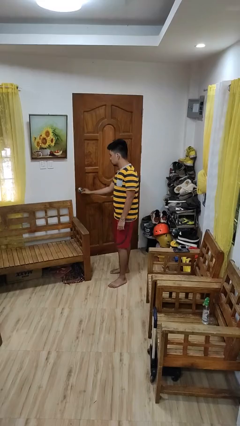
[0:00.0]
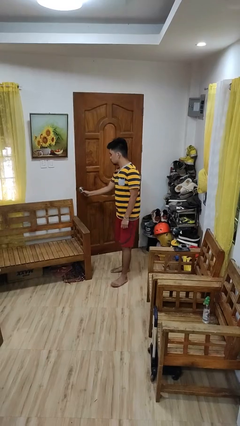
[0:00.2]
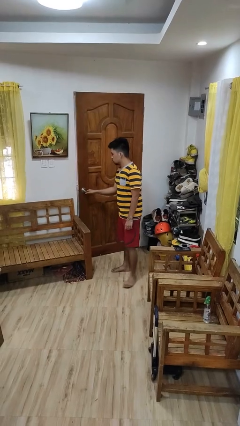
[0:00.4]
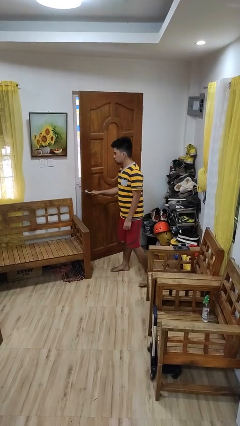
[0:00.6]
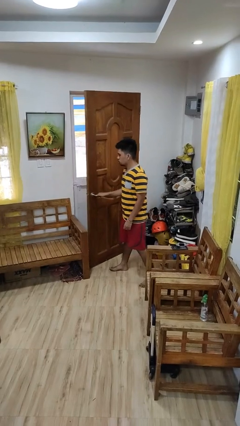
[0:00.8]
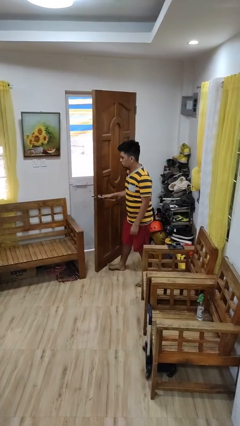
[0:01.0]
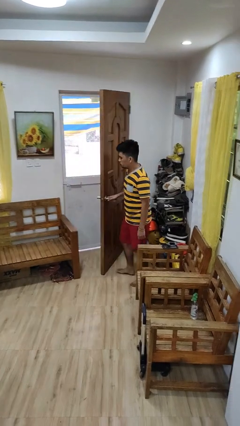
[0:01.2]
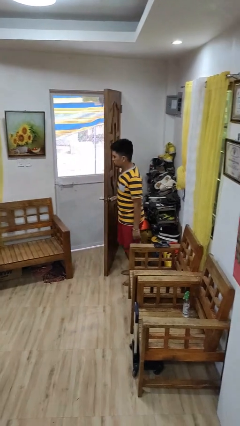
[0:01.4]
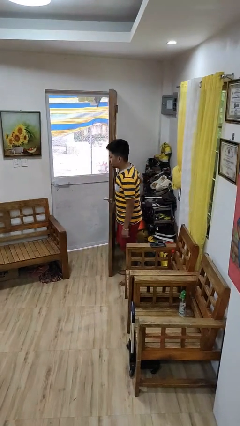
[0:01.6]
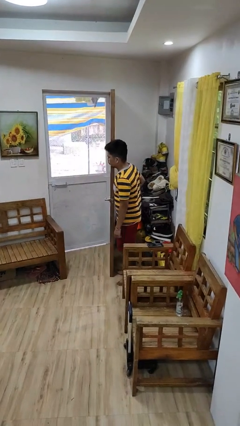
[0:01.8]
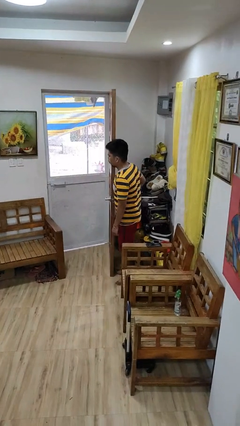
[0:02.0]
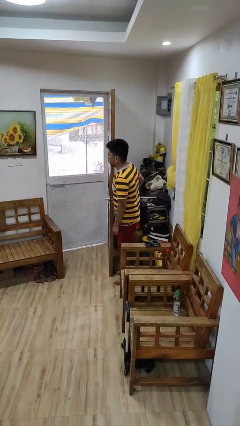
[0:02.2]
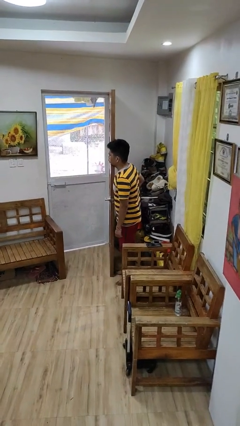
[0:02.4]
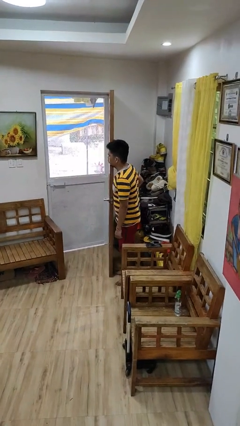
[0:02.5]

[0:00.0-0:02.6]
person opens facility door

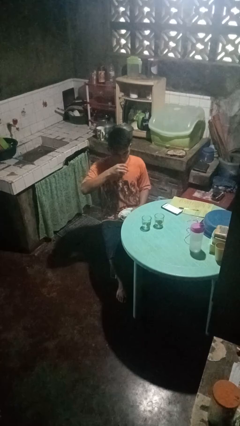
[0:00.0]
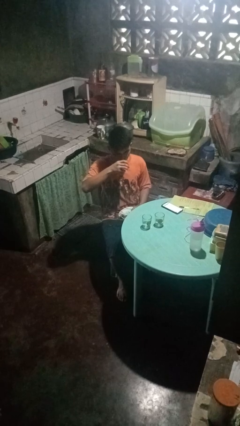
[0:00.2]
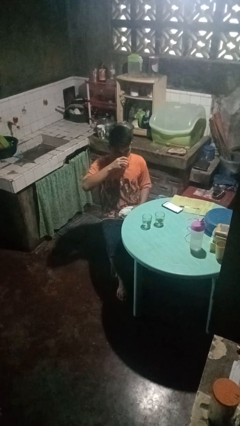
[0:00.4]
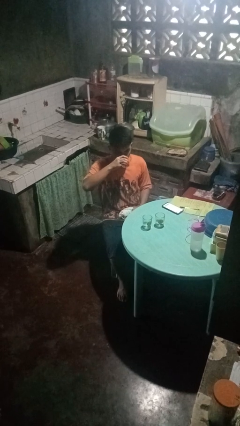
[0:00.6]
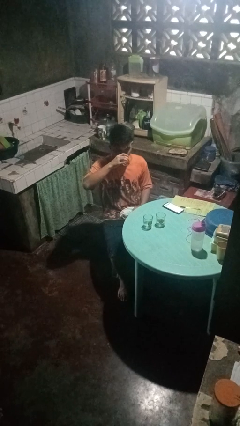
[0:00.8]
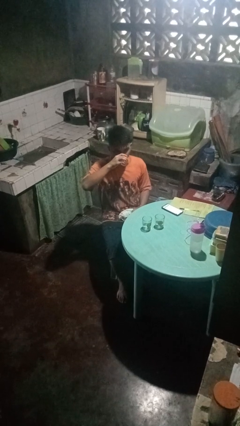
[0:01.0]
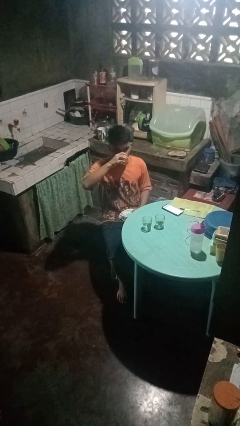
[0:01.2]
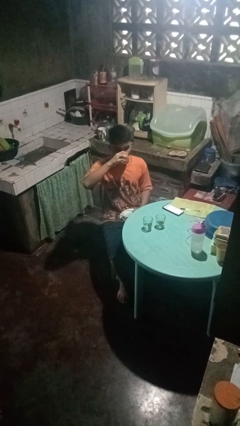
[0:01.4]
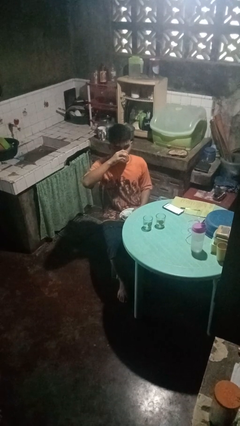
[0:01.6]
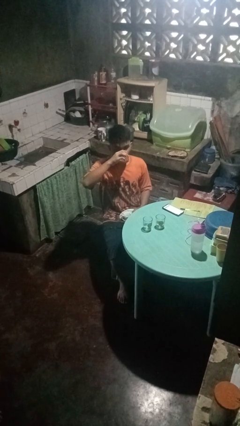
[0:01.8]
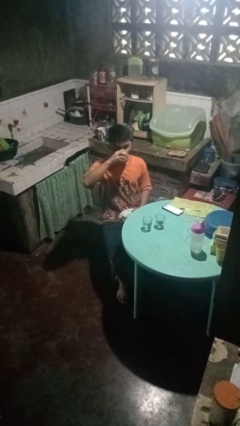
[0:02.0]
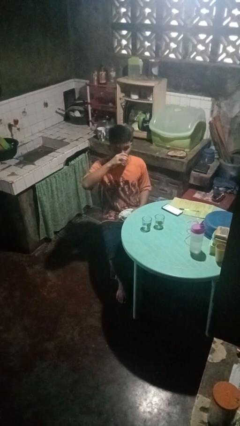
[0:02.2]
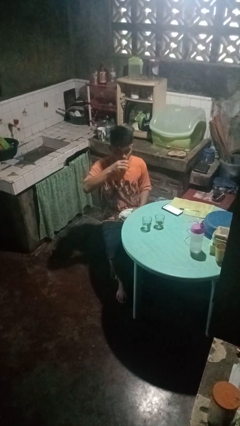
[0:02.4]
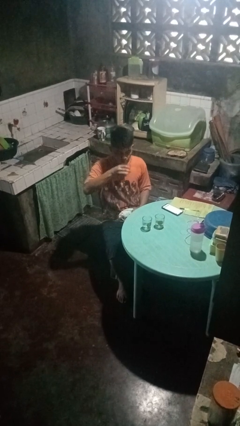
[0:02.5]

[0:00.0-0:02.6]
person drinks from shotglass

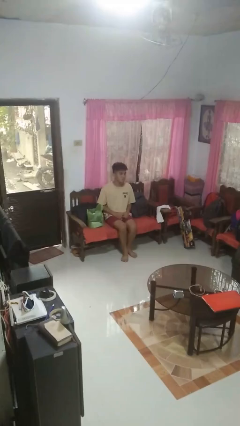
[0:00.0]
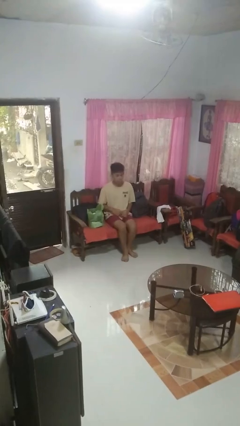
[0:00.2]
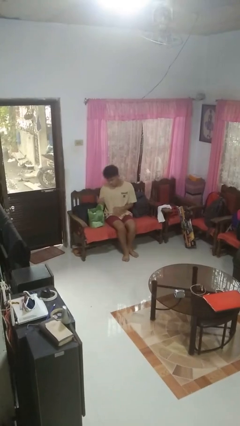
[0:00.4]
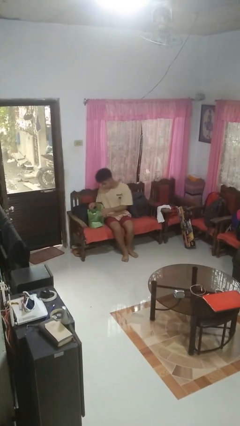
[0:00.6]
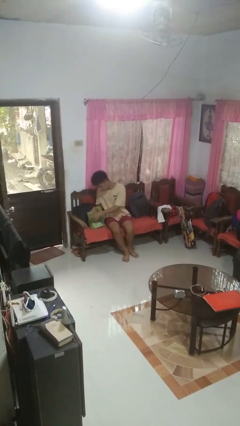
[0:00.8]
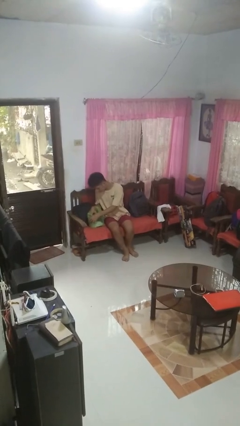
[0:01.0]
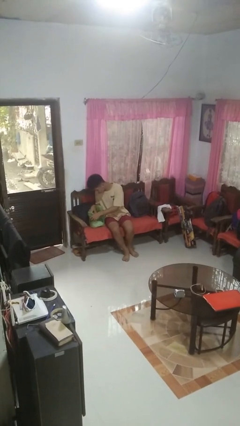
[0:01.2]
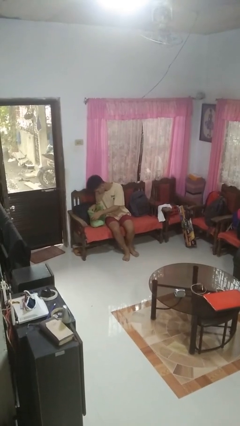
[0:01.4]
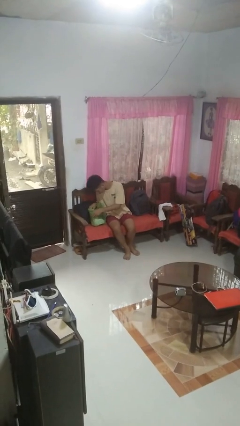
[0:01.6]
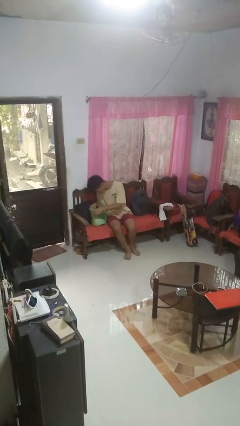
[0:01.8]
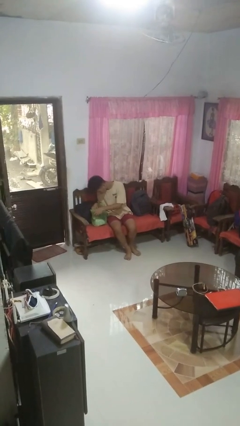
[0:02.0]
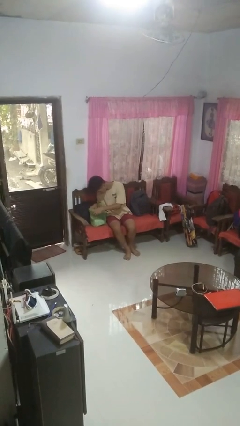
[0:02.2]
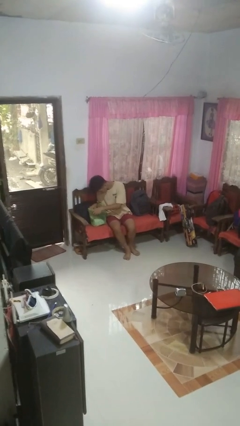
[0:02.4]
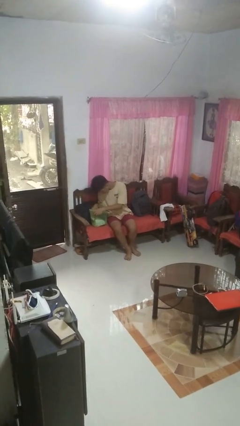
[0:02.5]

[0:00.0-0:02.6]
person searches in bag

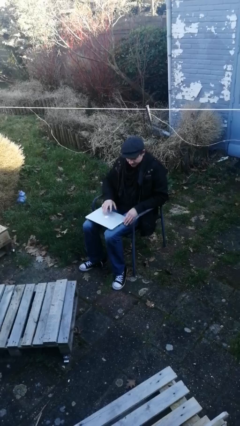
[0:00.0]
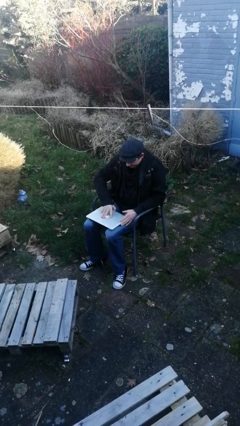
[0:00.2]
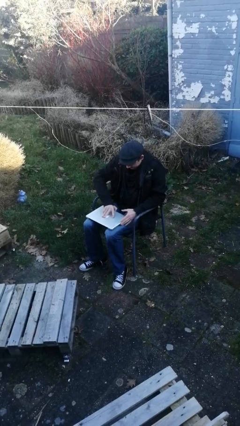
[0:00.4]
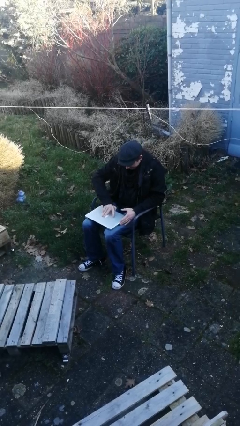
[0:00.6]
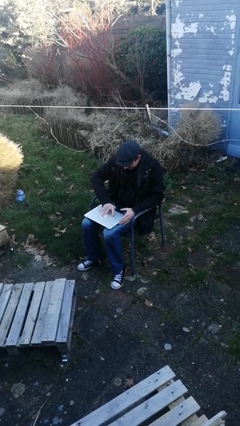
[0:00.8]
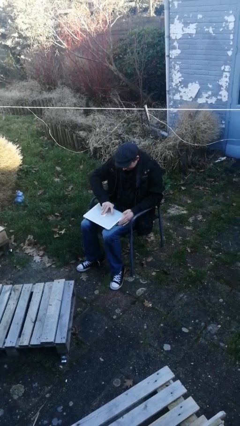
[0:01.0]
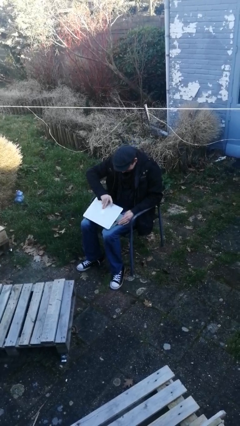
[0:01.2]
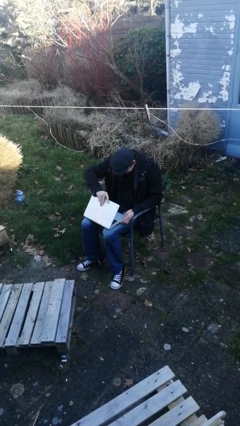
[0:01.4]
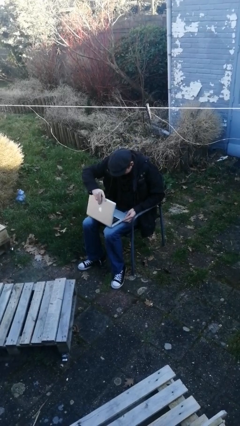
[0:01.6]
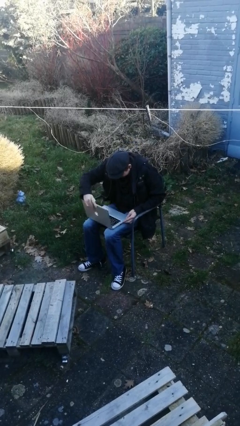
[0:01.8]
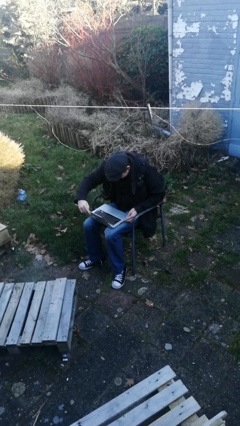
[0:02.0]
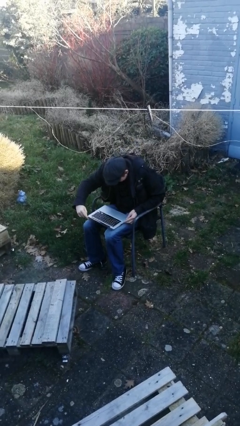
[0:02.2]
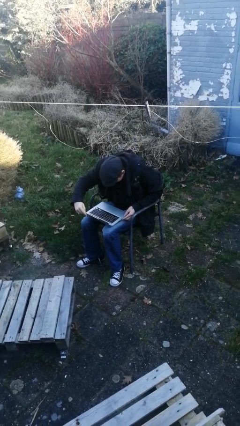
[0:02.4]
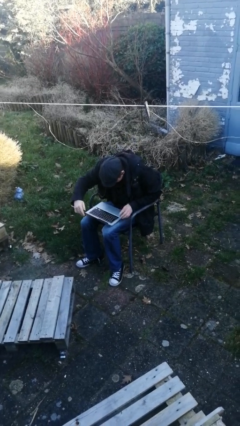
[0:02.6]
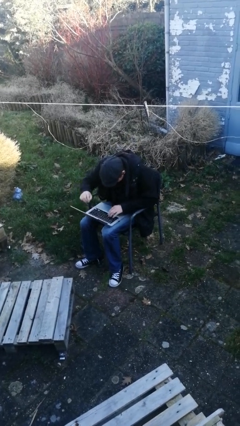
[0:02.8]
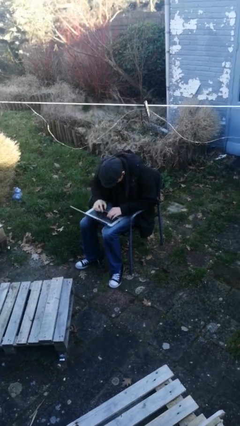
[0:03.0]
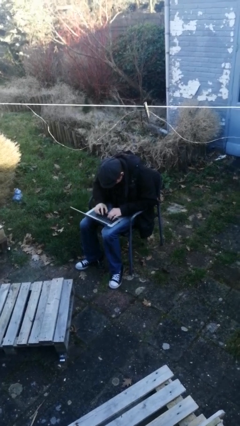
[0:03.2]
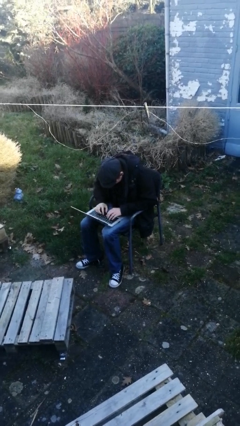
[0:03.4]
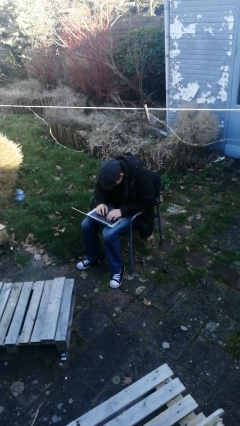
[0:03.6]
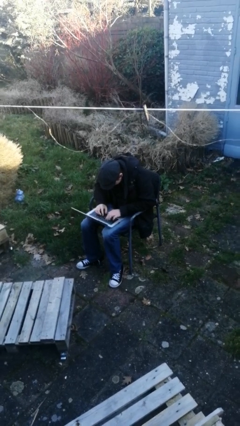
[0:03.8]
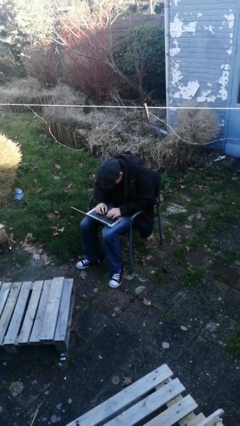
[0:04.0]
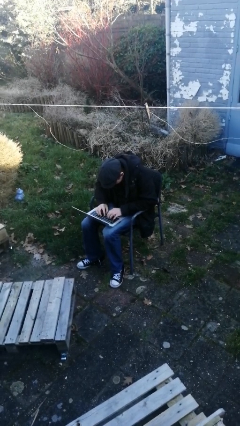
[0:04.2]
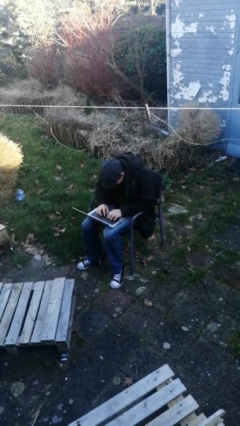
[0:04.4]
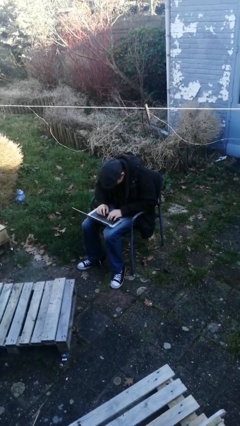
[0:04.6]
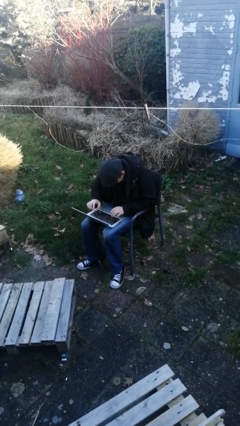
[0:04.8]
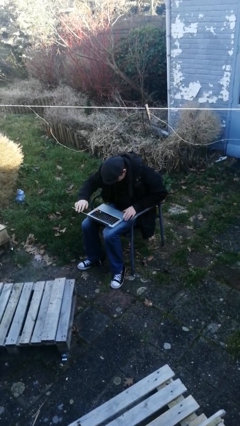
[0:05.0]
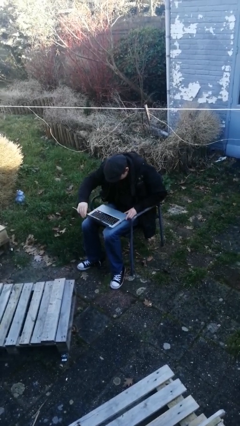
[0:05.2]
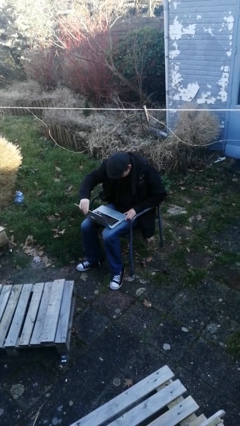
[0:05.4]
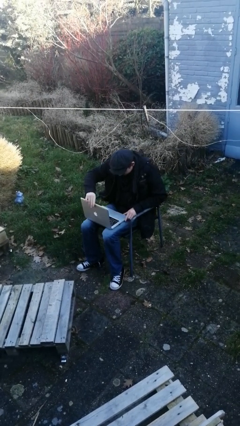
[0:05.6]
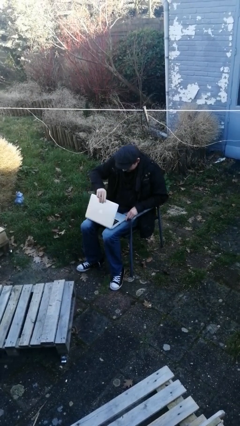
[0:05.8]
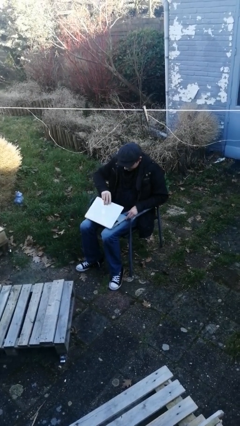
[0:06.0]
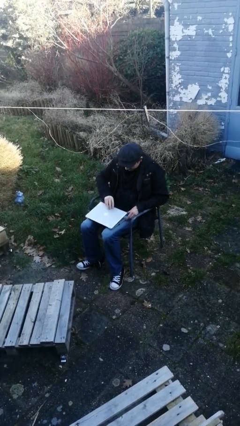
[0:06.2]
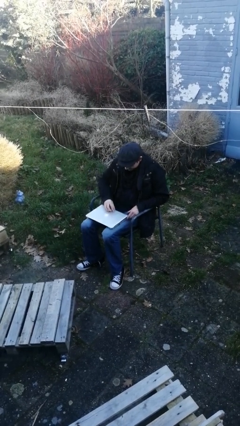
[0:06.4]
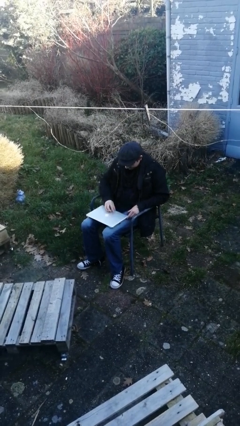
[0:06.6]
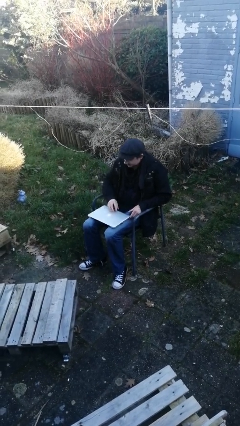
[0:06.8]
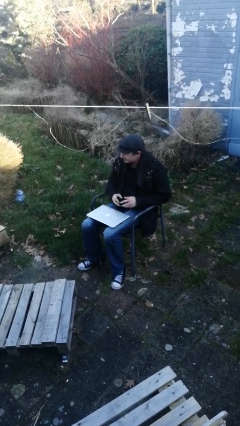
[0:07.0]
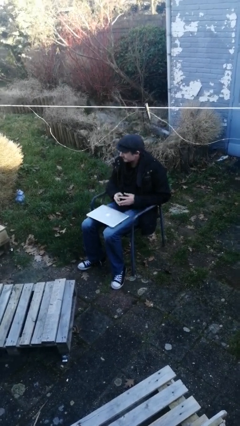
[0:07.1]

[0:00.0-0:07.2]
person interacts with laptop

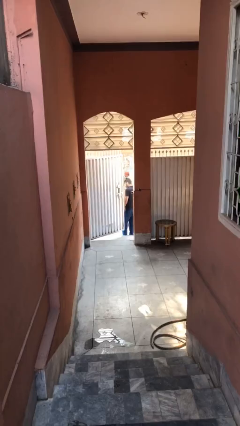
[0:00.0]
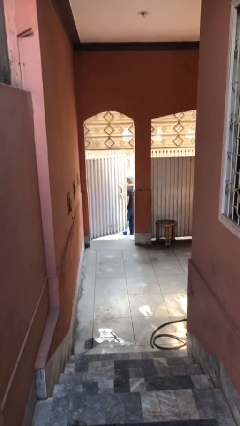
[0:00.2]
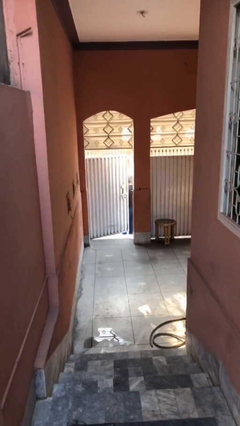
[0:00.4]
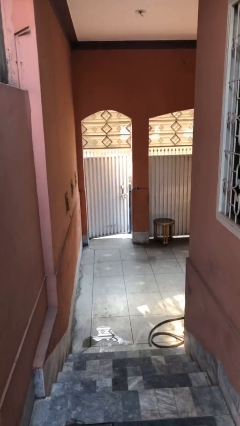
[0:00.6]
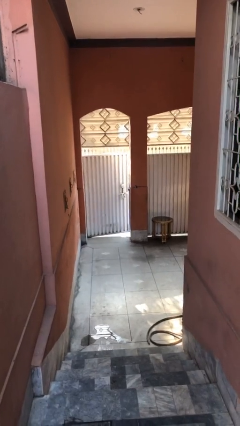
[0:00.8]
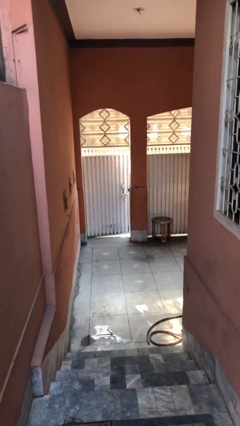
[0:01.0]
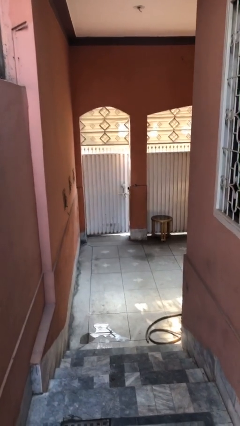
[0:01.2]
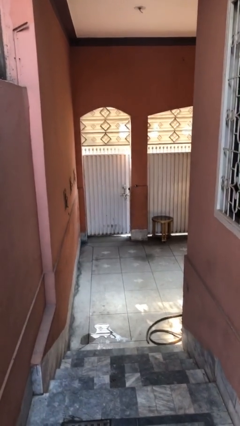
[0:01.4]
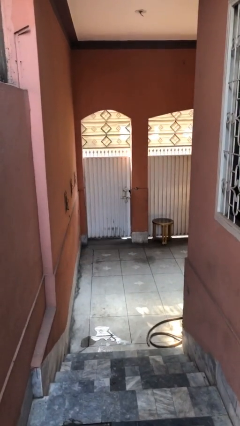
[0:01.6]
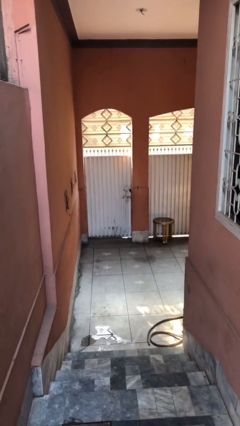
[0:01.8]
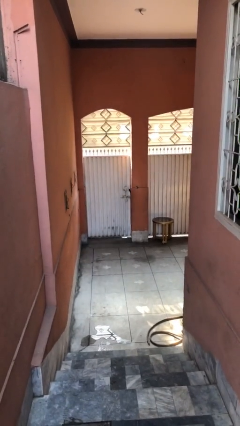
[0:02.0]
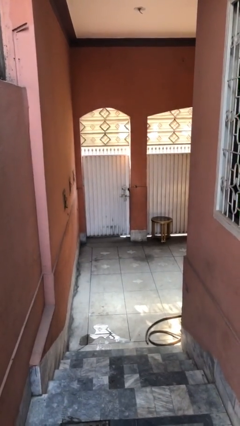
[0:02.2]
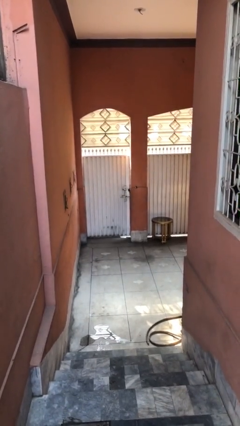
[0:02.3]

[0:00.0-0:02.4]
person closes facility door
